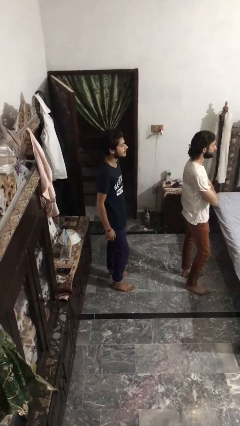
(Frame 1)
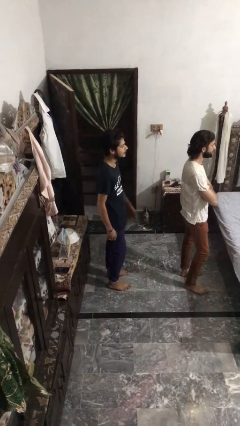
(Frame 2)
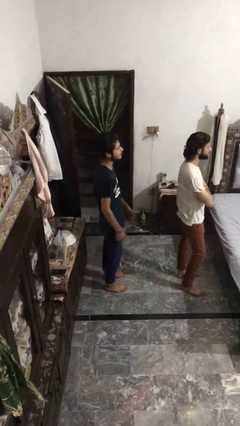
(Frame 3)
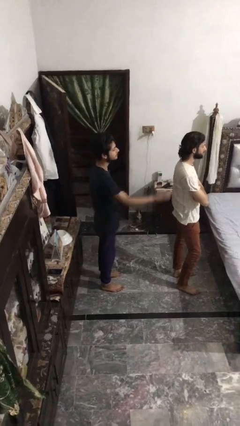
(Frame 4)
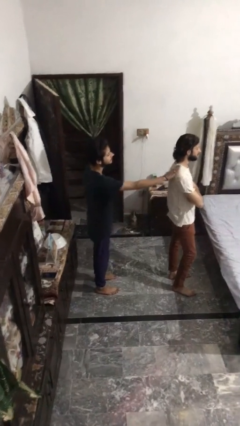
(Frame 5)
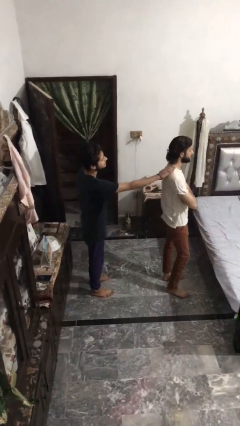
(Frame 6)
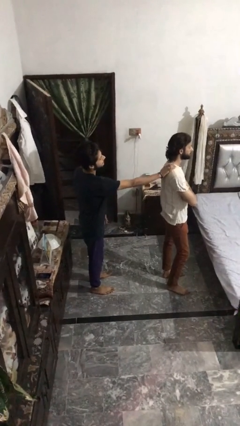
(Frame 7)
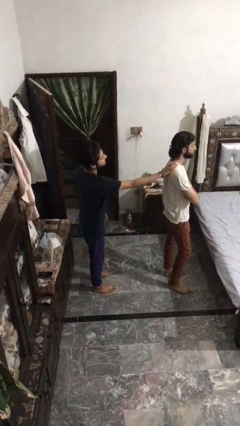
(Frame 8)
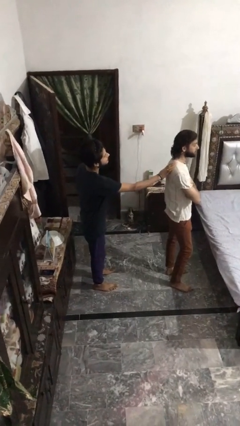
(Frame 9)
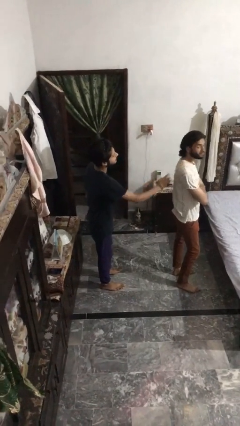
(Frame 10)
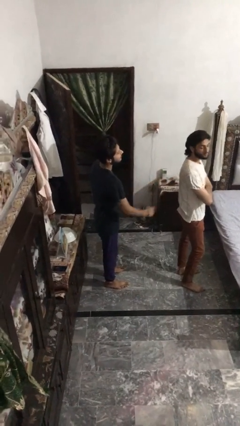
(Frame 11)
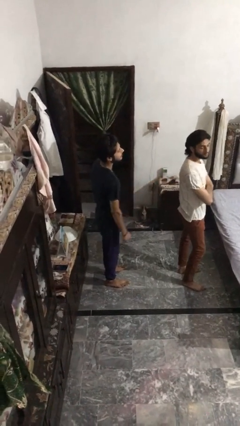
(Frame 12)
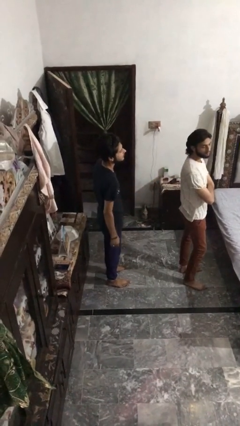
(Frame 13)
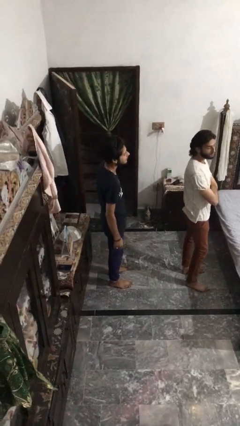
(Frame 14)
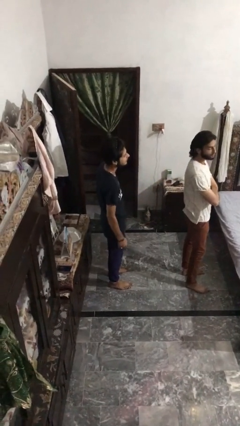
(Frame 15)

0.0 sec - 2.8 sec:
person touches back of person

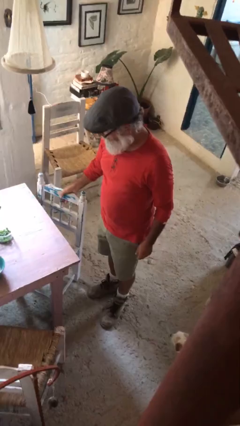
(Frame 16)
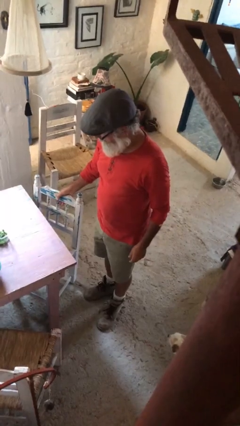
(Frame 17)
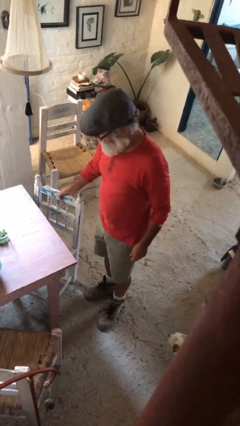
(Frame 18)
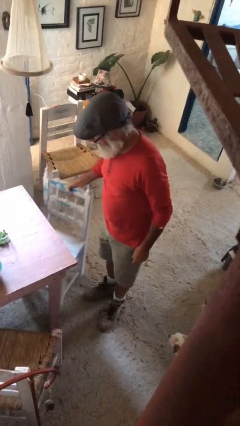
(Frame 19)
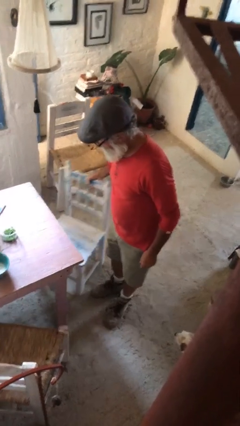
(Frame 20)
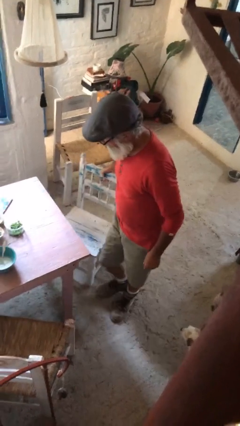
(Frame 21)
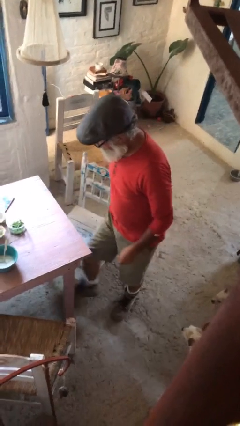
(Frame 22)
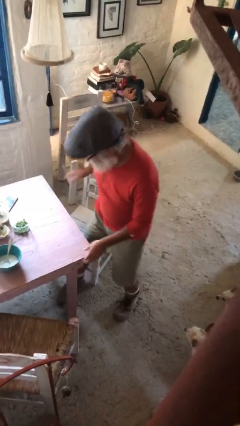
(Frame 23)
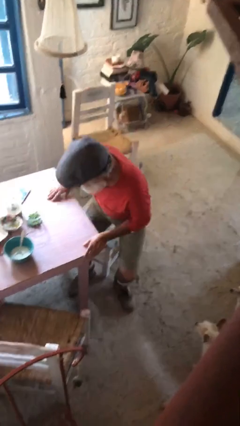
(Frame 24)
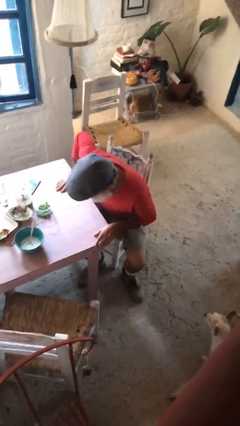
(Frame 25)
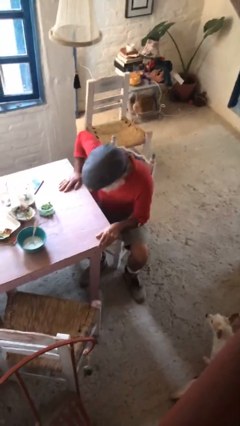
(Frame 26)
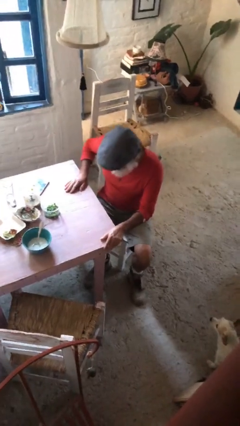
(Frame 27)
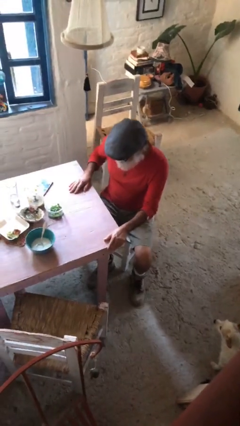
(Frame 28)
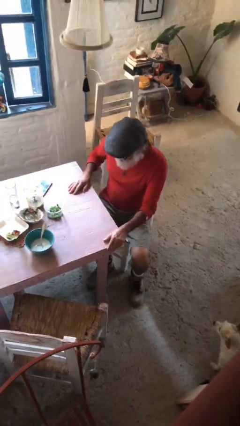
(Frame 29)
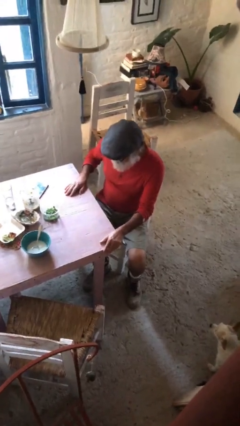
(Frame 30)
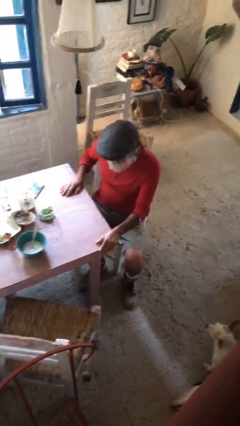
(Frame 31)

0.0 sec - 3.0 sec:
person sits down

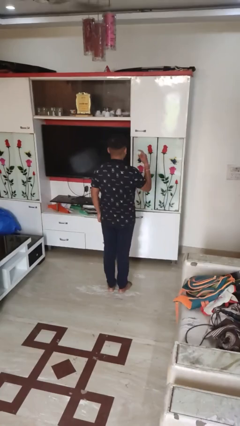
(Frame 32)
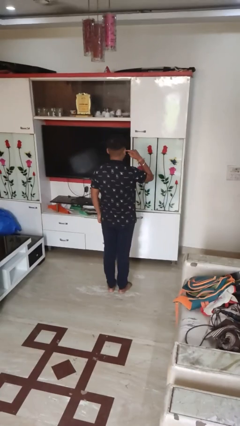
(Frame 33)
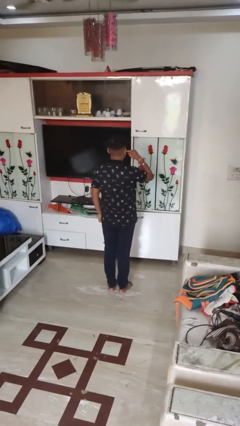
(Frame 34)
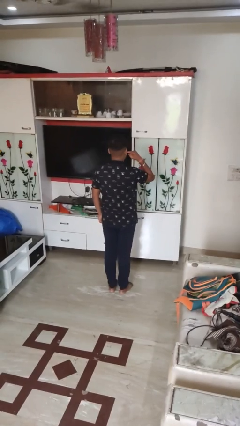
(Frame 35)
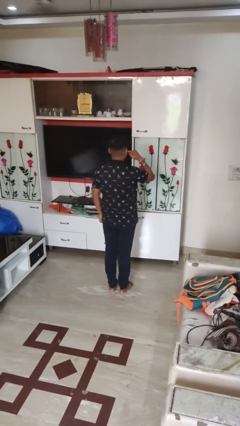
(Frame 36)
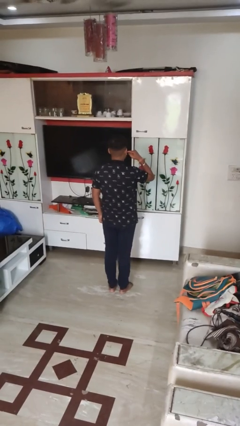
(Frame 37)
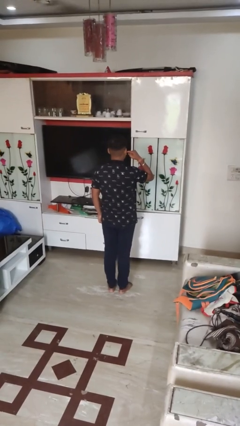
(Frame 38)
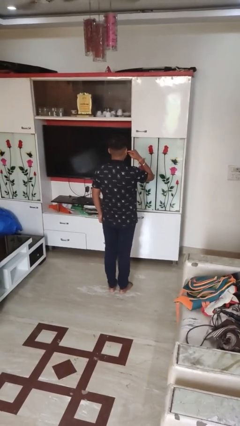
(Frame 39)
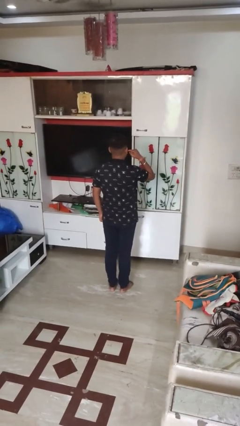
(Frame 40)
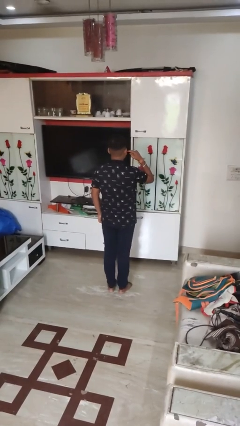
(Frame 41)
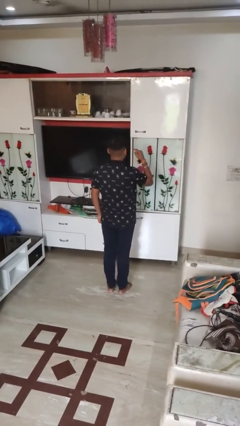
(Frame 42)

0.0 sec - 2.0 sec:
person gestures listen closely

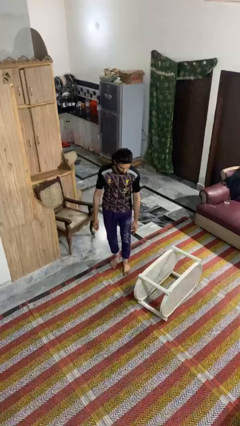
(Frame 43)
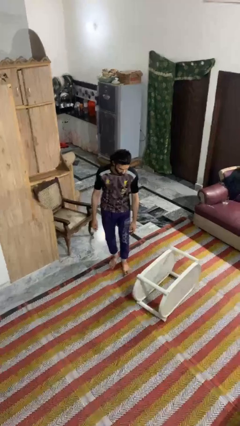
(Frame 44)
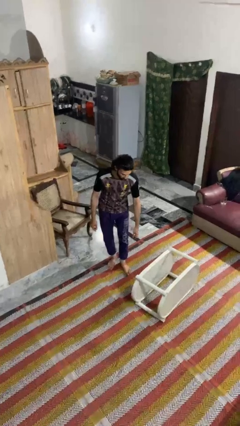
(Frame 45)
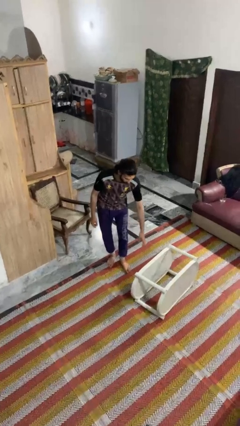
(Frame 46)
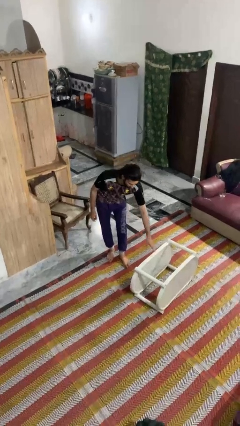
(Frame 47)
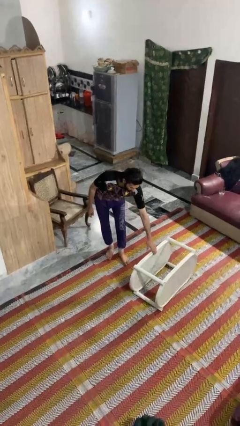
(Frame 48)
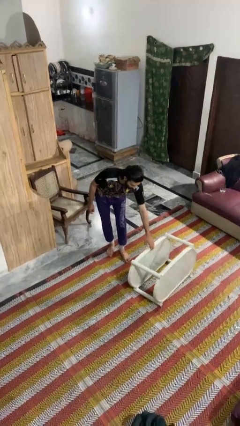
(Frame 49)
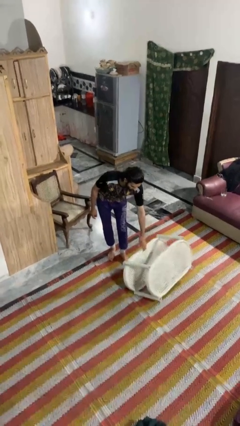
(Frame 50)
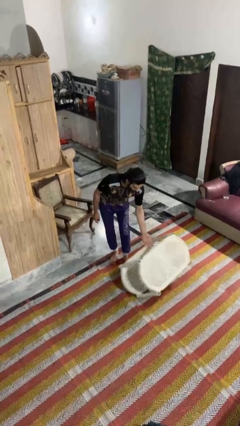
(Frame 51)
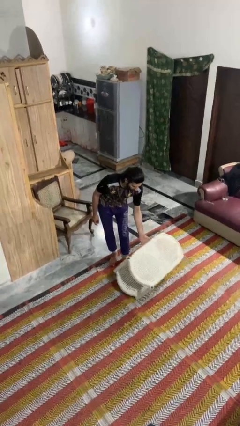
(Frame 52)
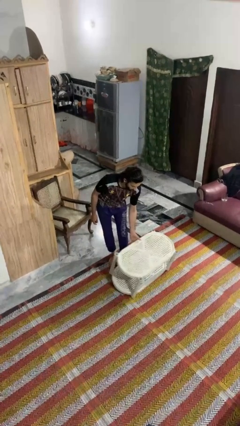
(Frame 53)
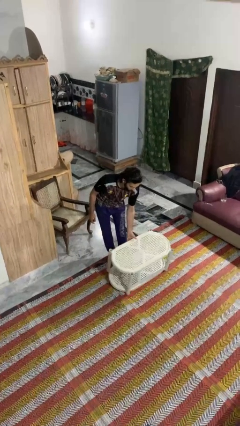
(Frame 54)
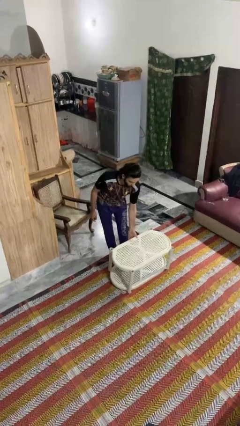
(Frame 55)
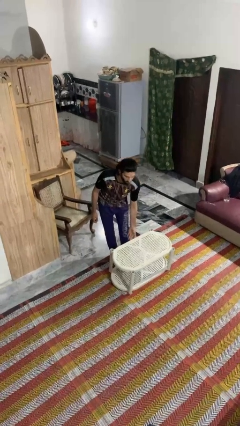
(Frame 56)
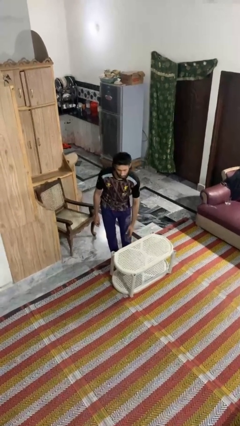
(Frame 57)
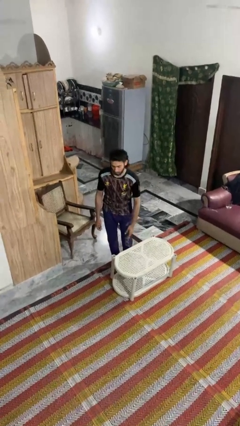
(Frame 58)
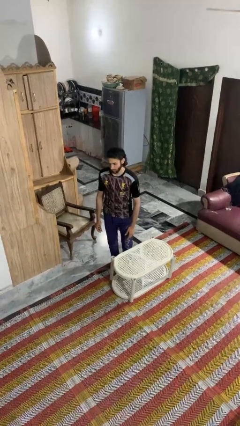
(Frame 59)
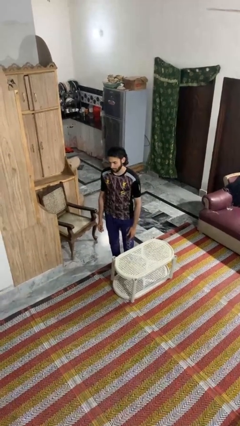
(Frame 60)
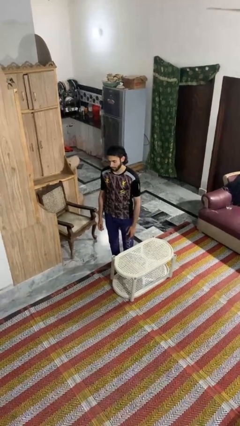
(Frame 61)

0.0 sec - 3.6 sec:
person sets upright furniture

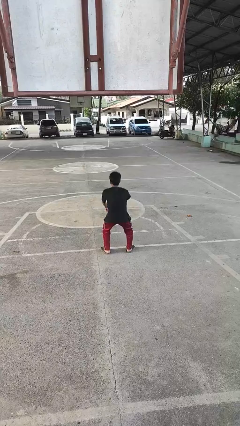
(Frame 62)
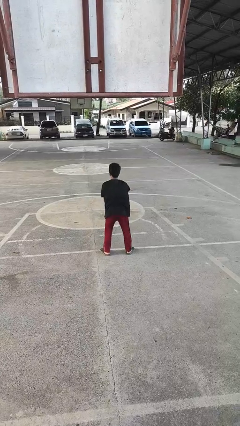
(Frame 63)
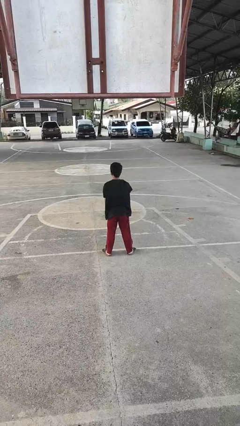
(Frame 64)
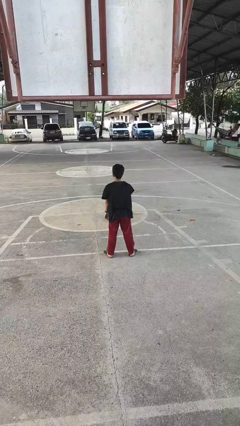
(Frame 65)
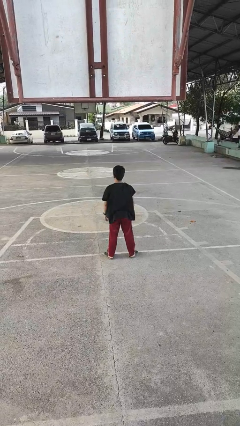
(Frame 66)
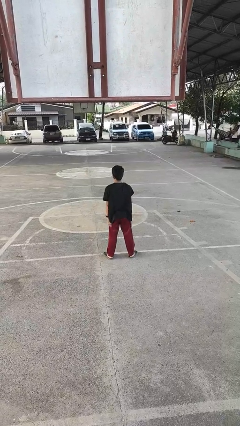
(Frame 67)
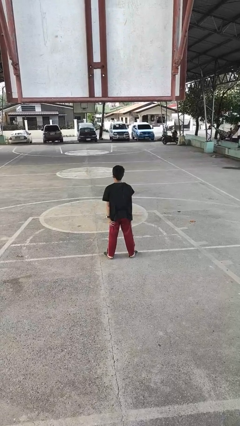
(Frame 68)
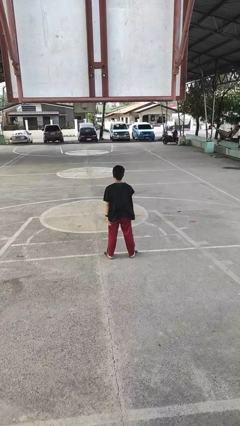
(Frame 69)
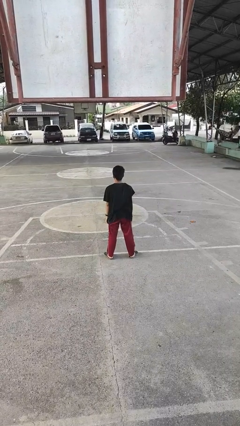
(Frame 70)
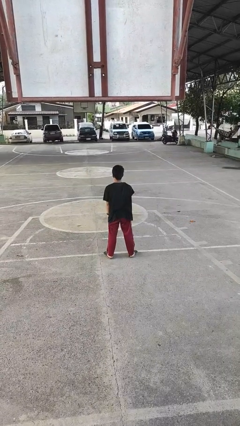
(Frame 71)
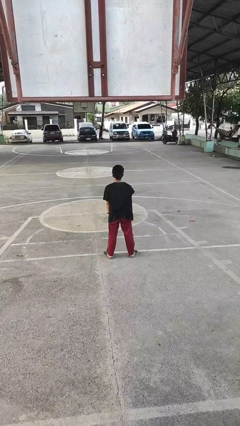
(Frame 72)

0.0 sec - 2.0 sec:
person stands up

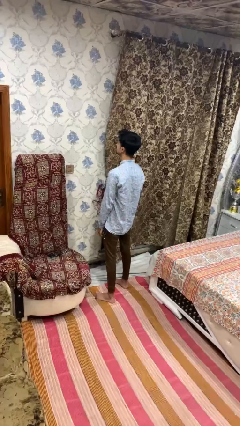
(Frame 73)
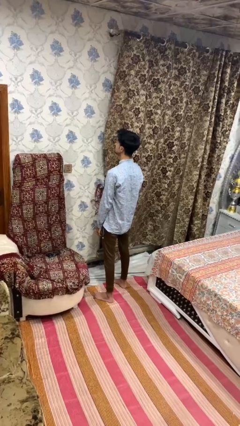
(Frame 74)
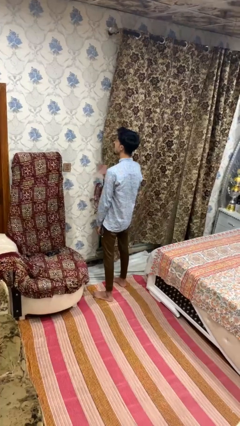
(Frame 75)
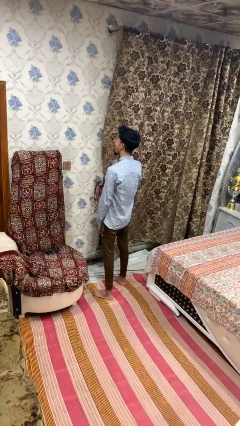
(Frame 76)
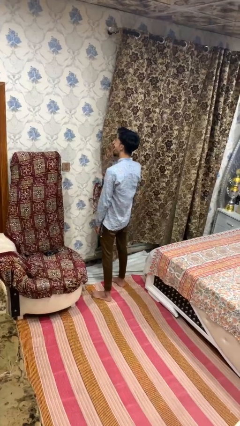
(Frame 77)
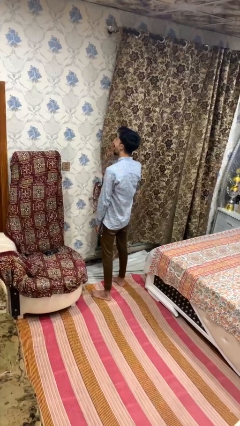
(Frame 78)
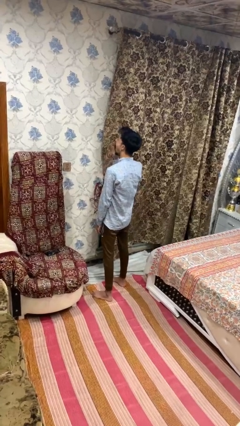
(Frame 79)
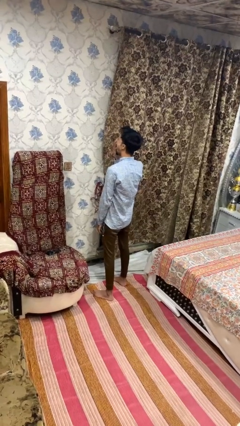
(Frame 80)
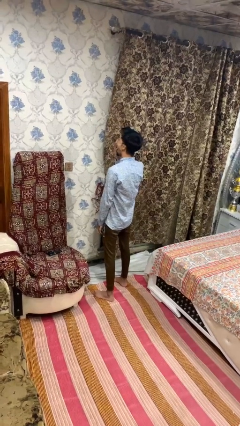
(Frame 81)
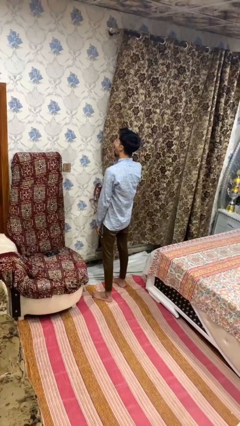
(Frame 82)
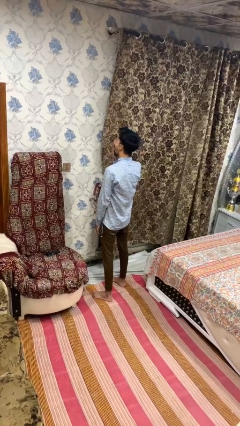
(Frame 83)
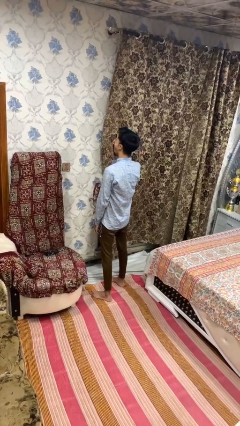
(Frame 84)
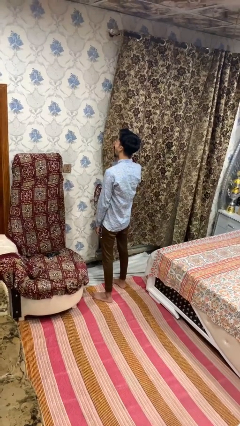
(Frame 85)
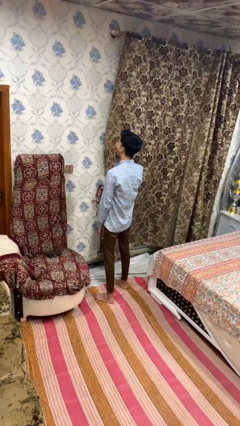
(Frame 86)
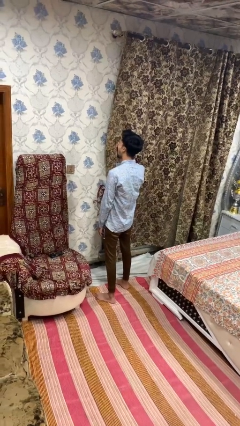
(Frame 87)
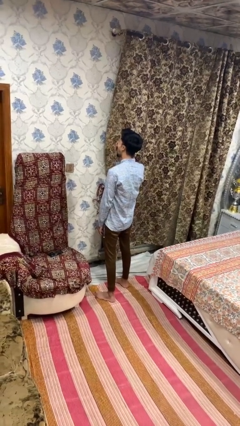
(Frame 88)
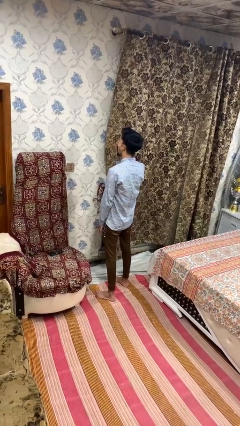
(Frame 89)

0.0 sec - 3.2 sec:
person yawns

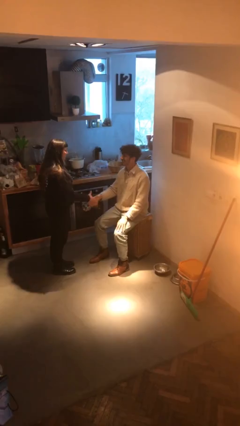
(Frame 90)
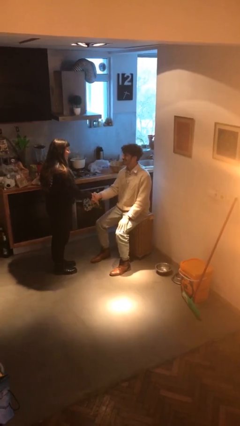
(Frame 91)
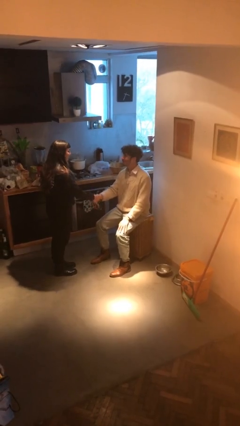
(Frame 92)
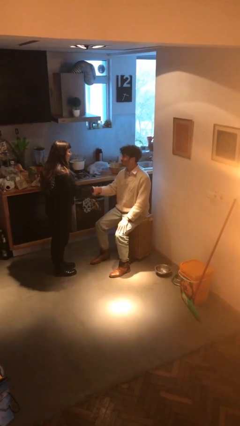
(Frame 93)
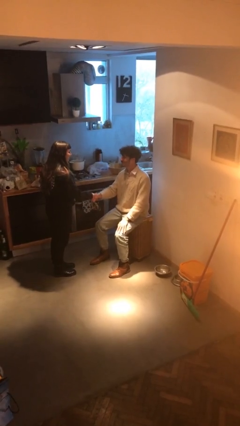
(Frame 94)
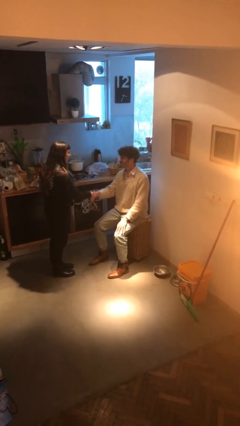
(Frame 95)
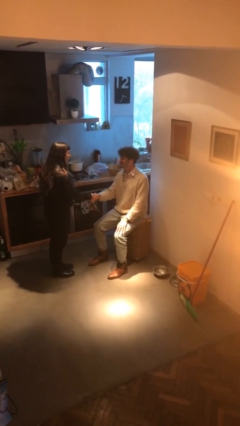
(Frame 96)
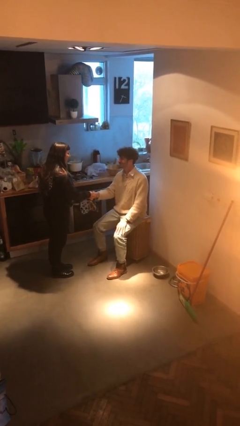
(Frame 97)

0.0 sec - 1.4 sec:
person shakes hand
